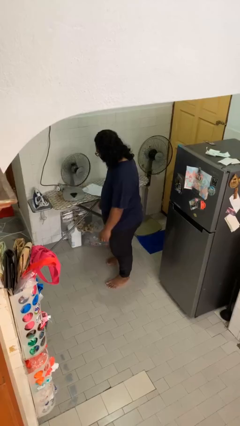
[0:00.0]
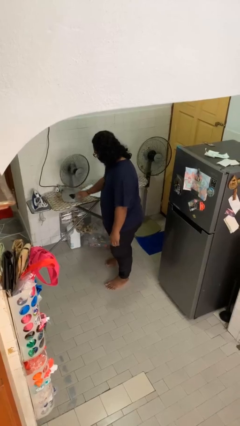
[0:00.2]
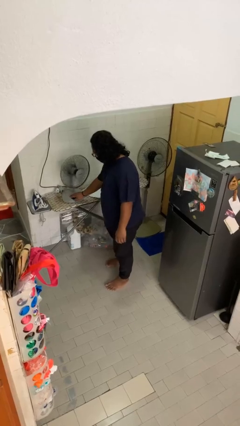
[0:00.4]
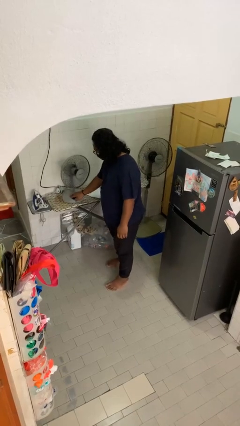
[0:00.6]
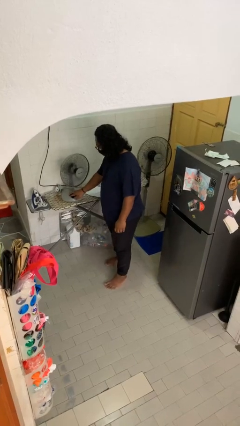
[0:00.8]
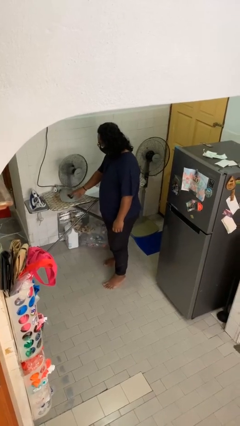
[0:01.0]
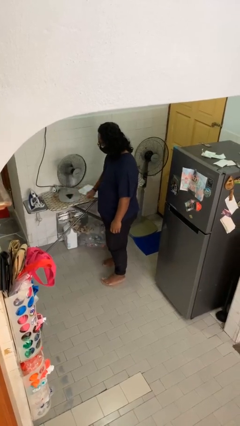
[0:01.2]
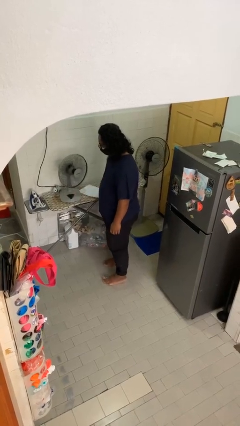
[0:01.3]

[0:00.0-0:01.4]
person turns off fan

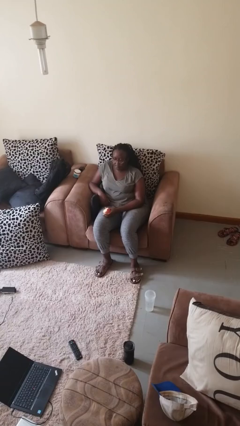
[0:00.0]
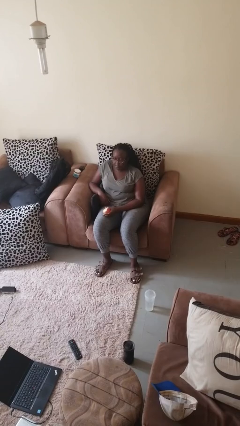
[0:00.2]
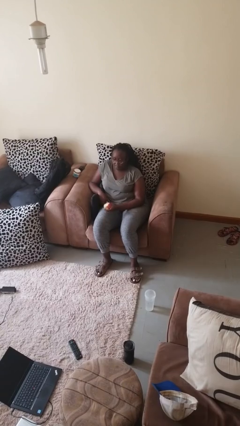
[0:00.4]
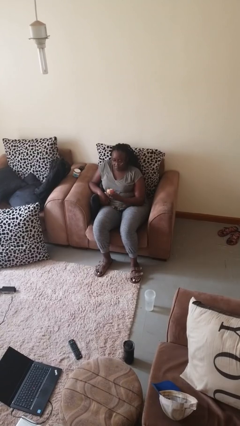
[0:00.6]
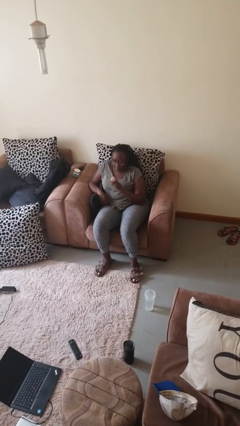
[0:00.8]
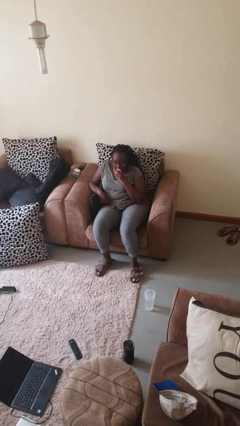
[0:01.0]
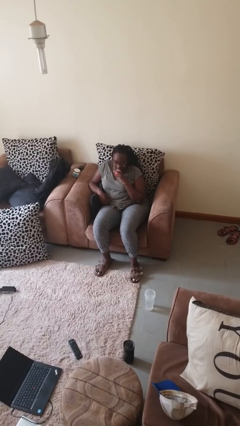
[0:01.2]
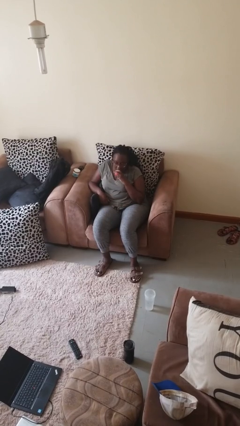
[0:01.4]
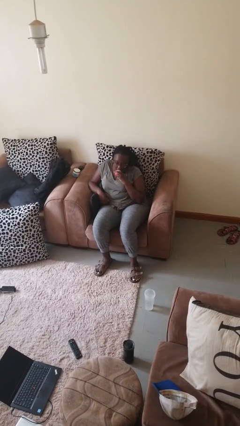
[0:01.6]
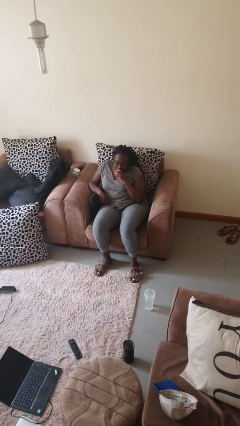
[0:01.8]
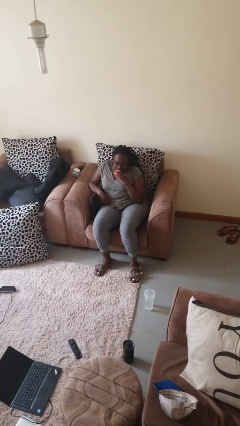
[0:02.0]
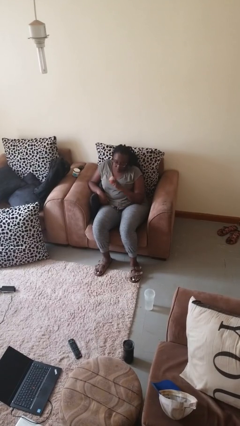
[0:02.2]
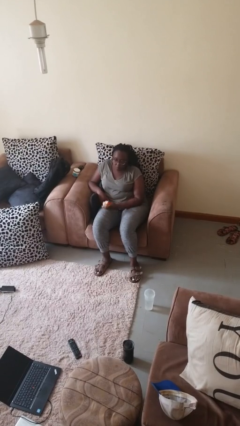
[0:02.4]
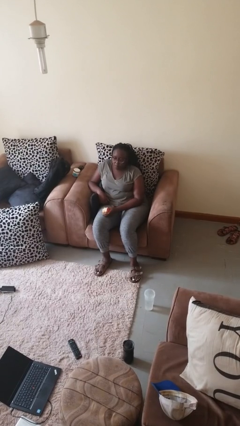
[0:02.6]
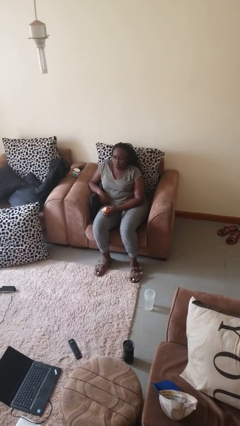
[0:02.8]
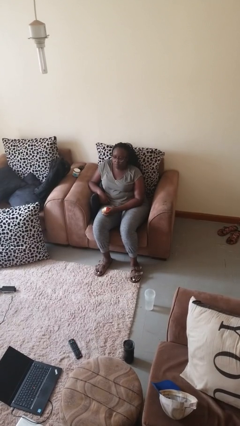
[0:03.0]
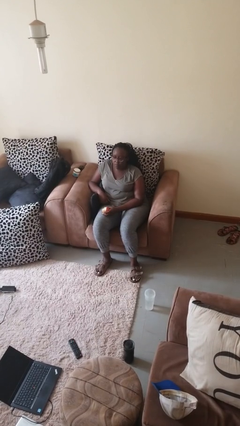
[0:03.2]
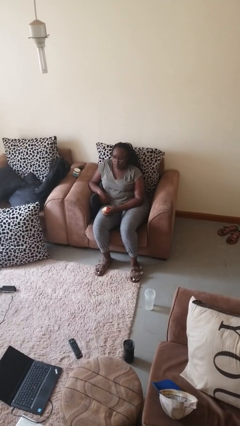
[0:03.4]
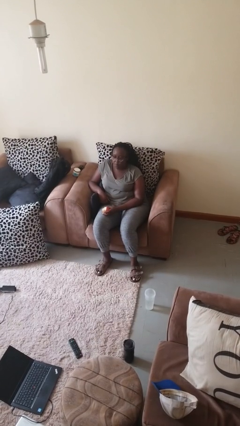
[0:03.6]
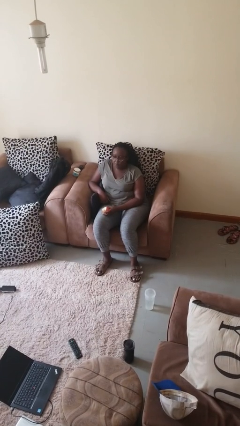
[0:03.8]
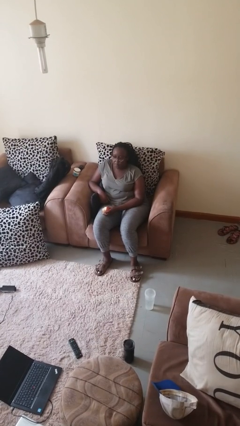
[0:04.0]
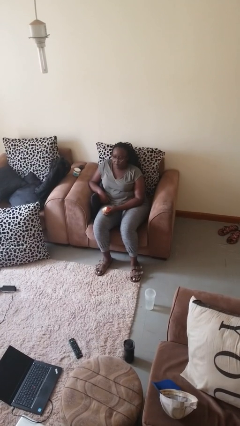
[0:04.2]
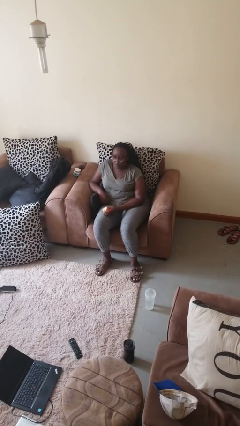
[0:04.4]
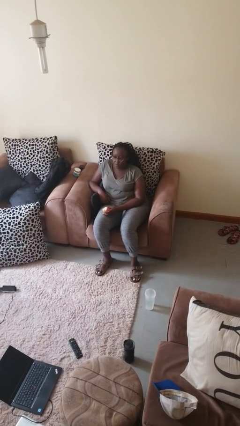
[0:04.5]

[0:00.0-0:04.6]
person eats apple

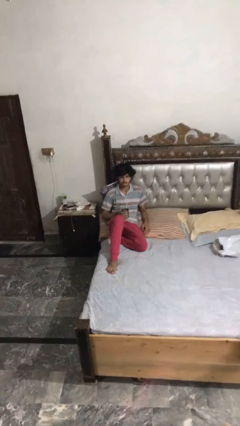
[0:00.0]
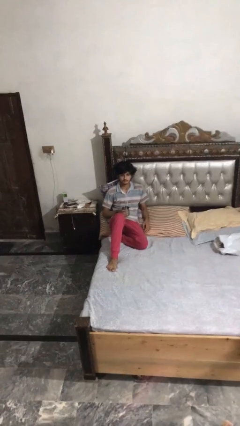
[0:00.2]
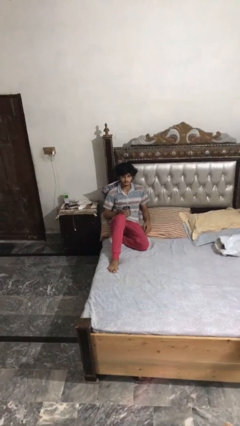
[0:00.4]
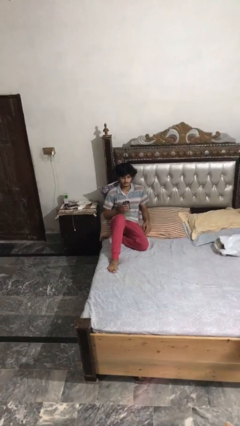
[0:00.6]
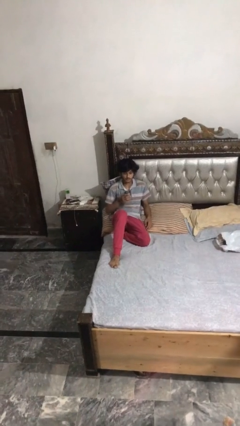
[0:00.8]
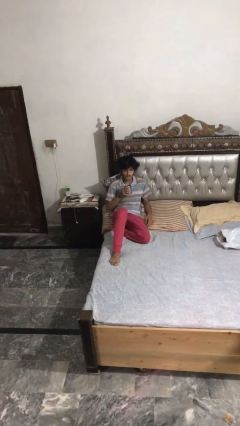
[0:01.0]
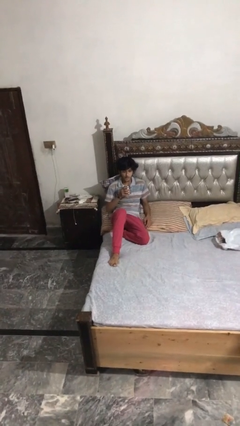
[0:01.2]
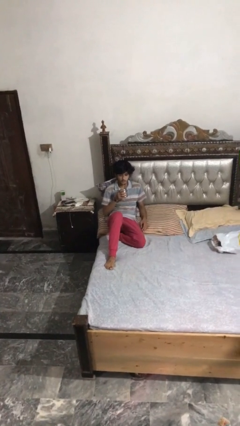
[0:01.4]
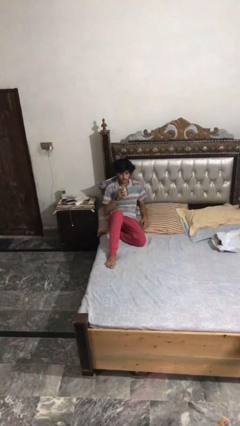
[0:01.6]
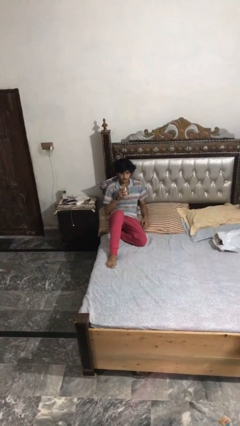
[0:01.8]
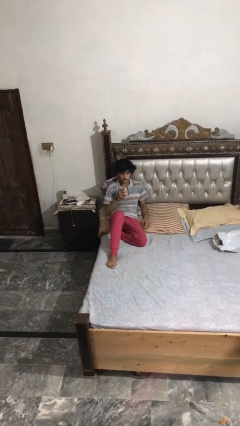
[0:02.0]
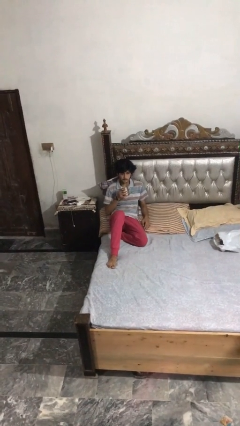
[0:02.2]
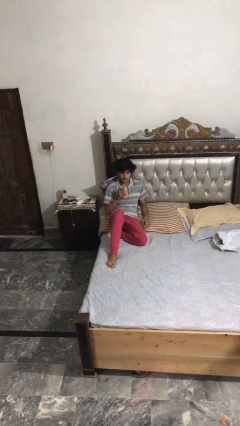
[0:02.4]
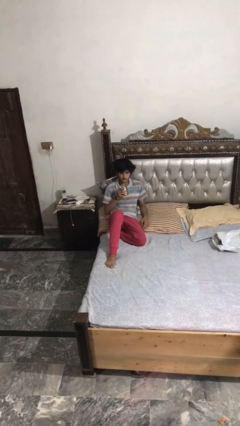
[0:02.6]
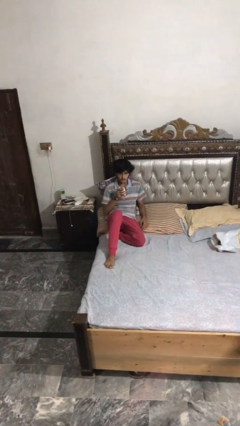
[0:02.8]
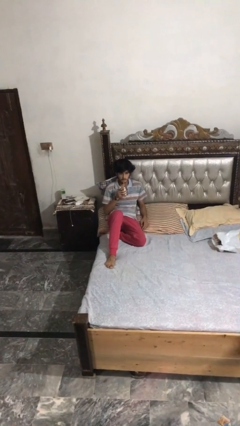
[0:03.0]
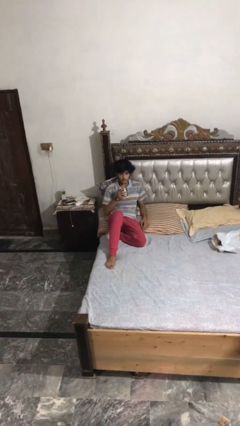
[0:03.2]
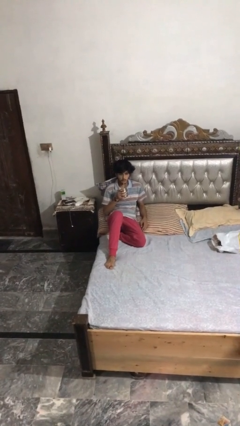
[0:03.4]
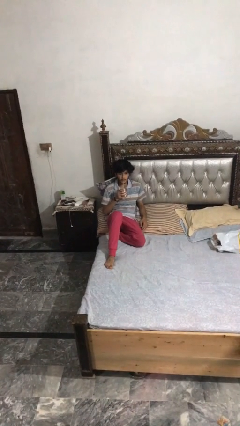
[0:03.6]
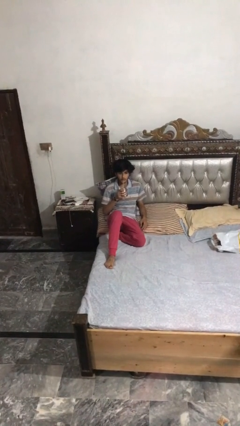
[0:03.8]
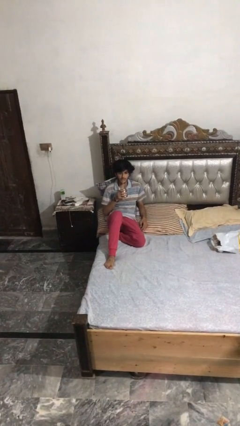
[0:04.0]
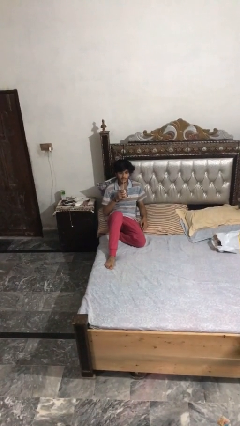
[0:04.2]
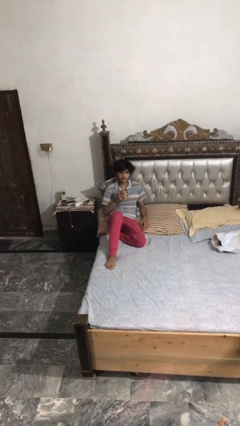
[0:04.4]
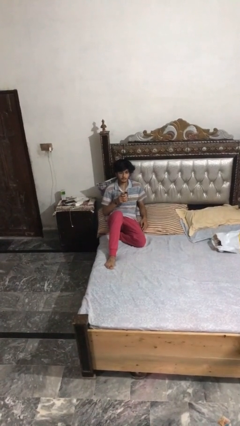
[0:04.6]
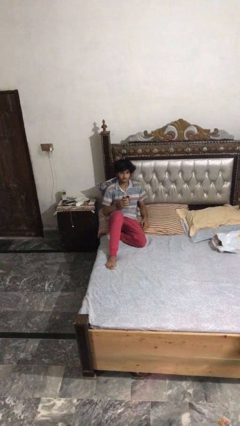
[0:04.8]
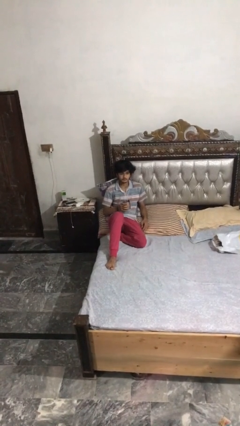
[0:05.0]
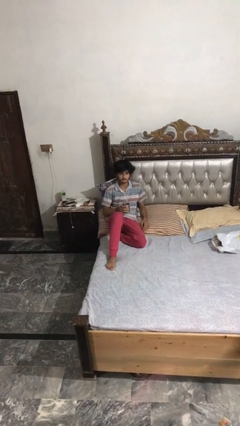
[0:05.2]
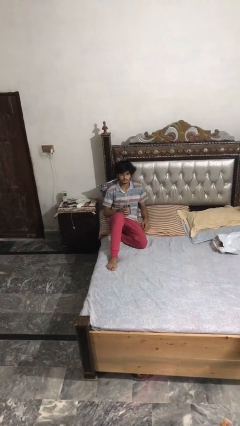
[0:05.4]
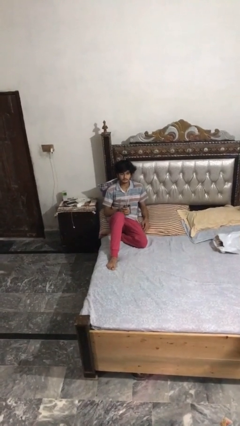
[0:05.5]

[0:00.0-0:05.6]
person drinks from straw

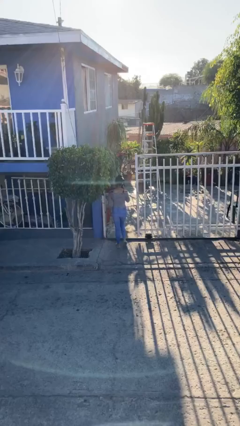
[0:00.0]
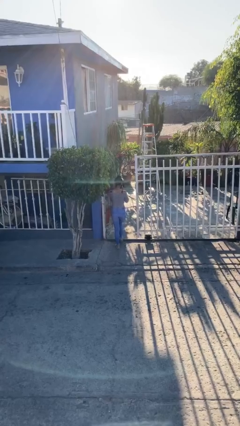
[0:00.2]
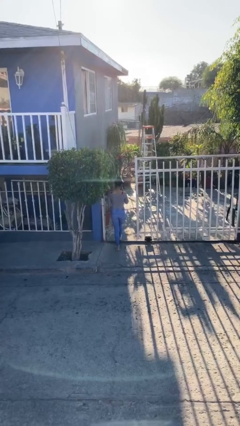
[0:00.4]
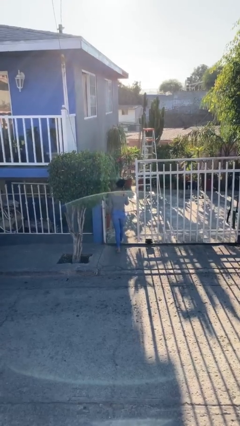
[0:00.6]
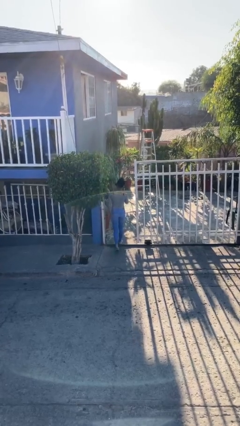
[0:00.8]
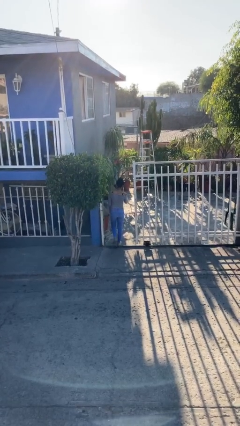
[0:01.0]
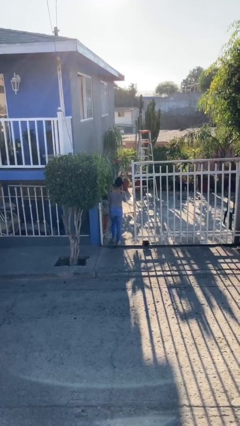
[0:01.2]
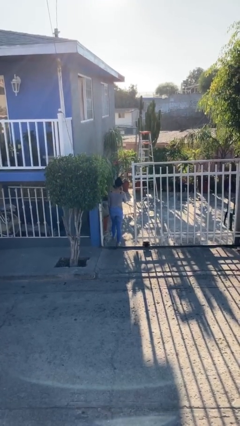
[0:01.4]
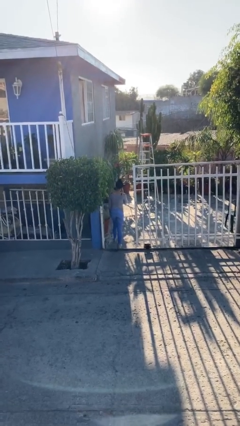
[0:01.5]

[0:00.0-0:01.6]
person exits scene through structure

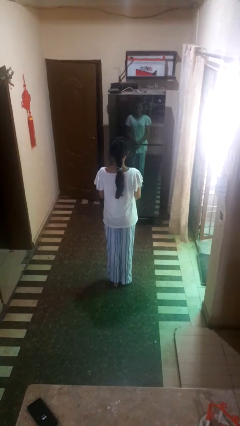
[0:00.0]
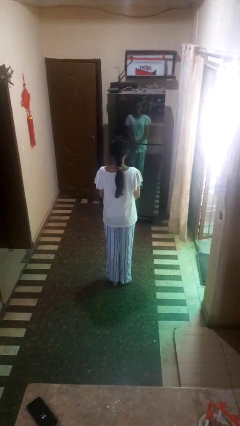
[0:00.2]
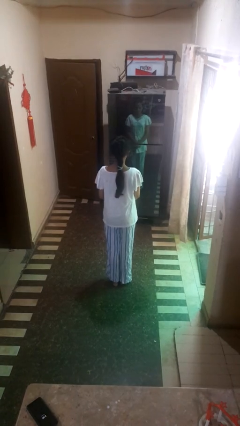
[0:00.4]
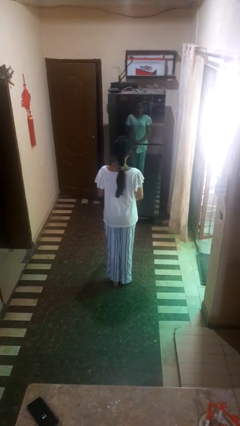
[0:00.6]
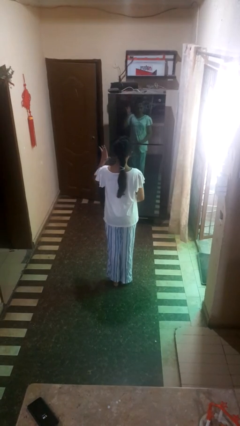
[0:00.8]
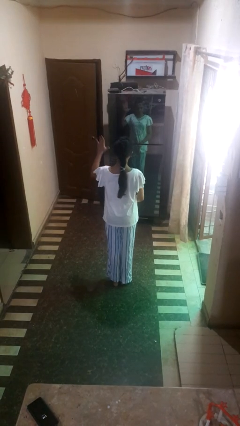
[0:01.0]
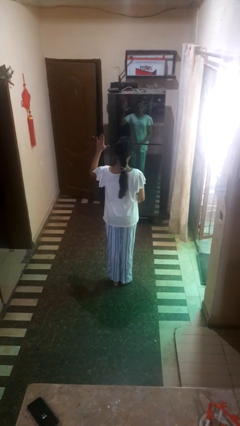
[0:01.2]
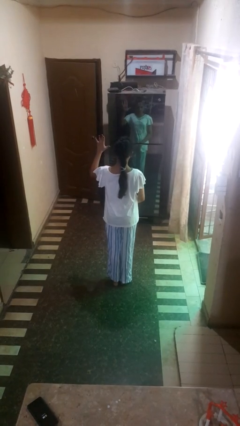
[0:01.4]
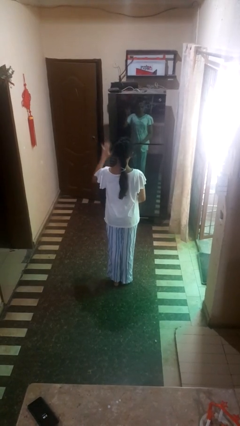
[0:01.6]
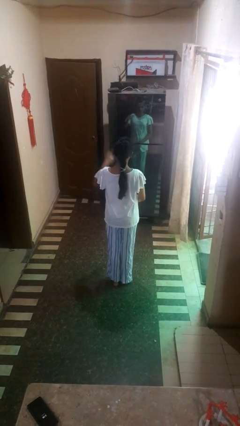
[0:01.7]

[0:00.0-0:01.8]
person gestures number five

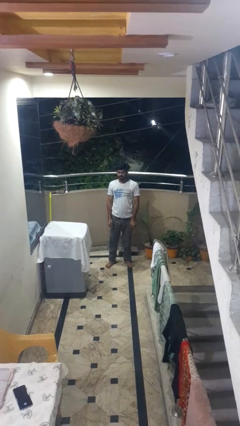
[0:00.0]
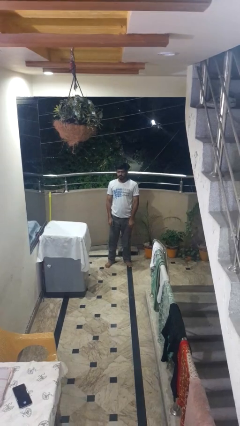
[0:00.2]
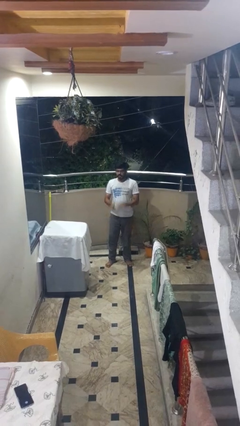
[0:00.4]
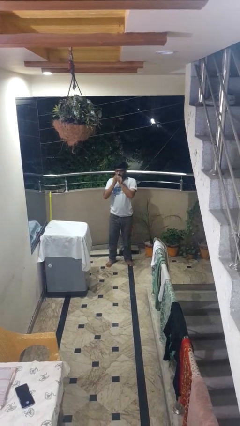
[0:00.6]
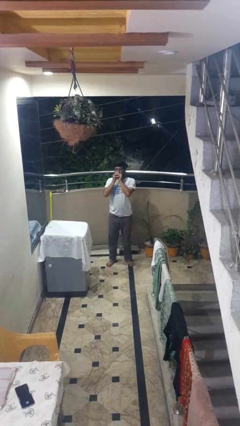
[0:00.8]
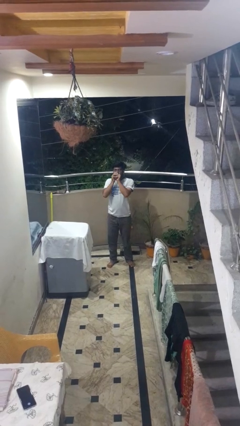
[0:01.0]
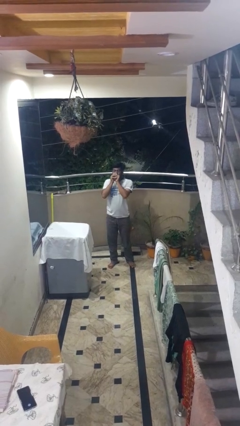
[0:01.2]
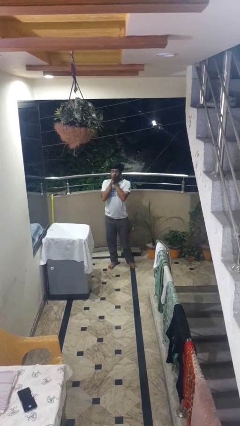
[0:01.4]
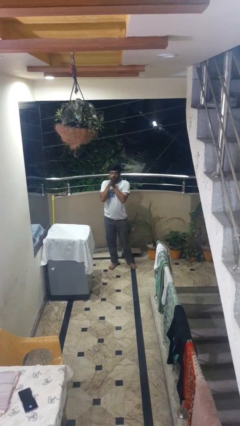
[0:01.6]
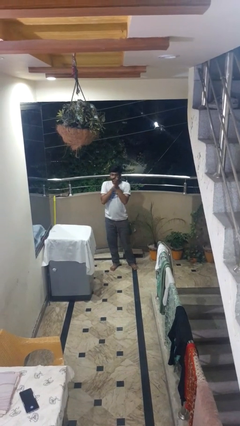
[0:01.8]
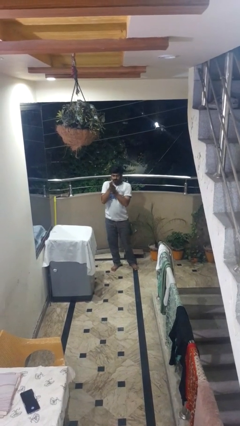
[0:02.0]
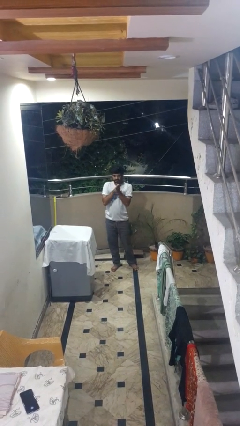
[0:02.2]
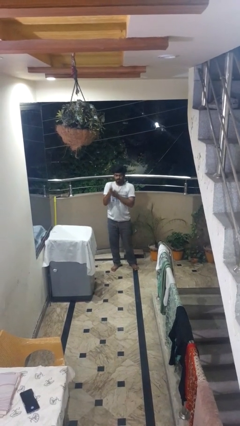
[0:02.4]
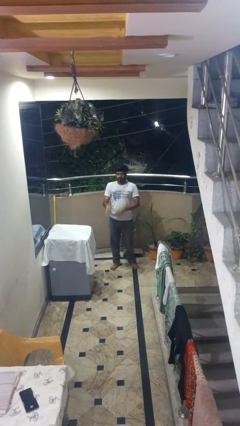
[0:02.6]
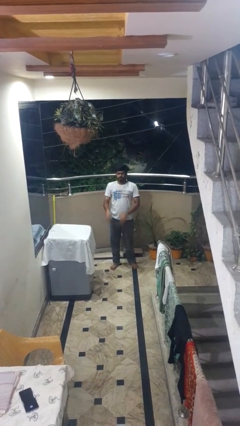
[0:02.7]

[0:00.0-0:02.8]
person blows into hands
